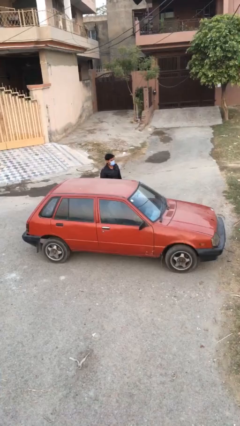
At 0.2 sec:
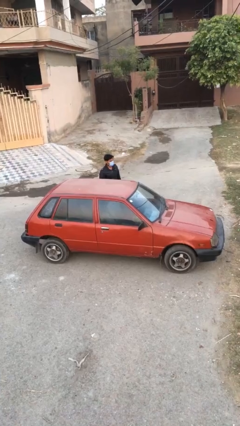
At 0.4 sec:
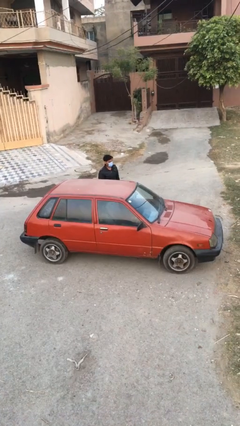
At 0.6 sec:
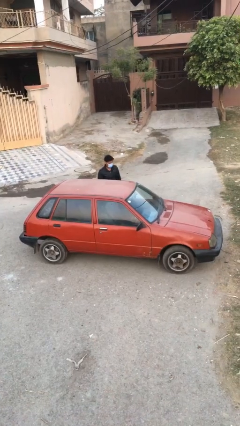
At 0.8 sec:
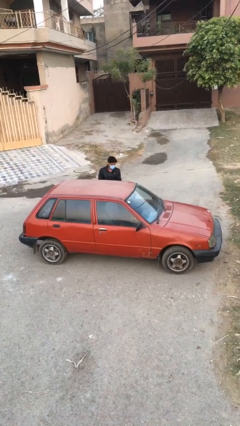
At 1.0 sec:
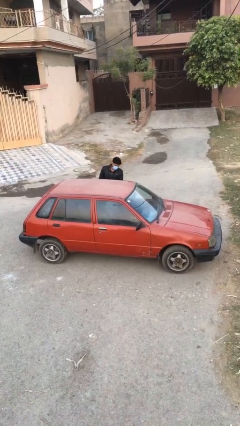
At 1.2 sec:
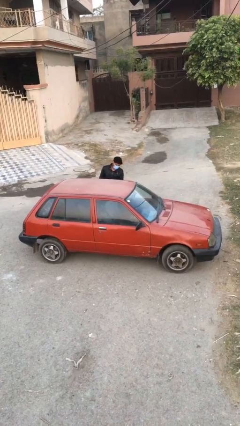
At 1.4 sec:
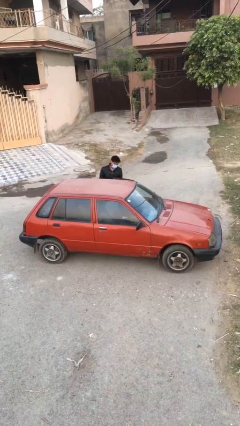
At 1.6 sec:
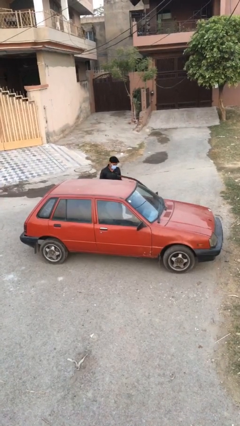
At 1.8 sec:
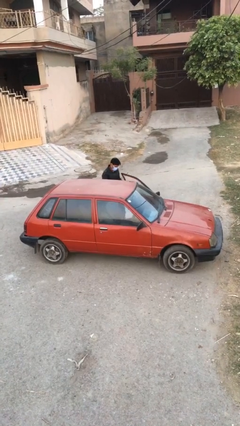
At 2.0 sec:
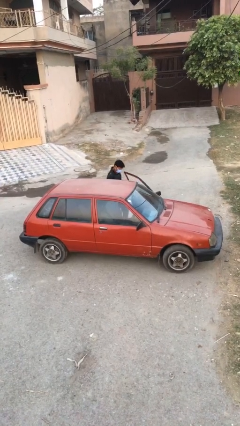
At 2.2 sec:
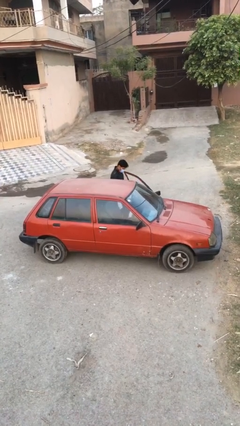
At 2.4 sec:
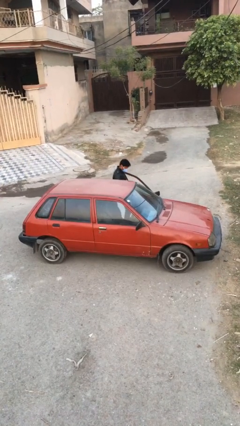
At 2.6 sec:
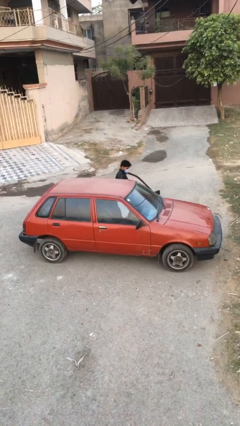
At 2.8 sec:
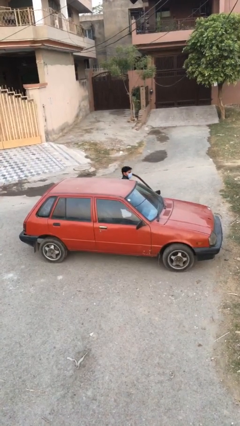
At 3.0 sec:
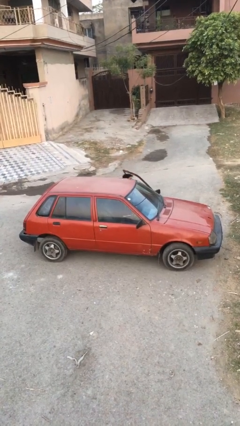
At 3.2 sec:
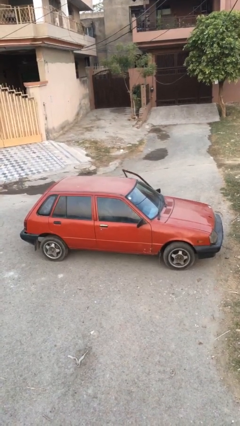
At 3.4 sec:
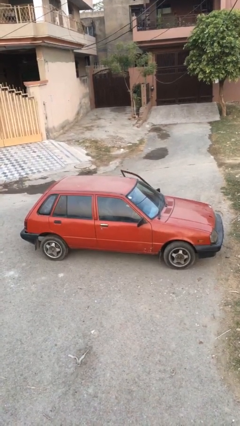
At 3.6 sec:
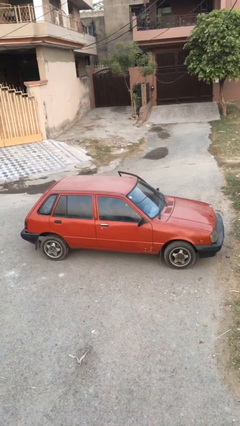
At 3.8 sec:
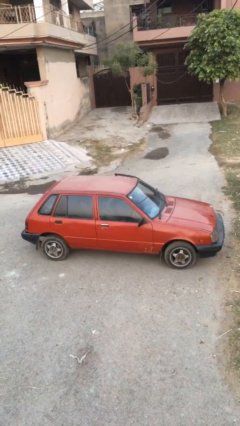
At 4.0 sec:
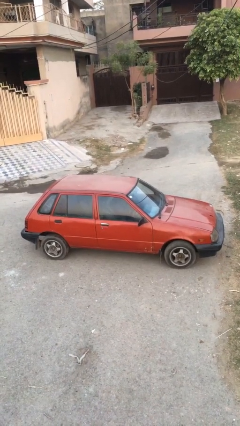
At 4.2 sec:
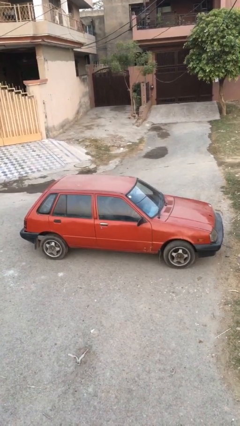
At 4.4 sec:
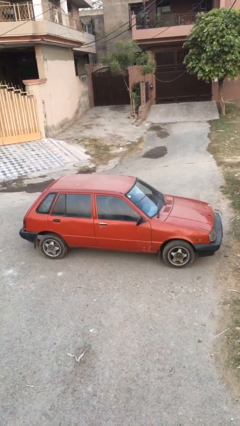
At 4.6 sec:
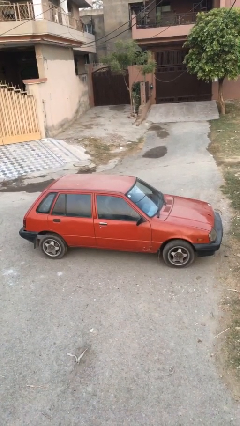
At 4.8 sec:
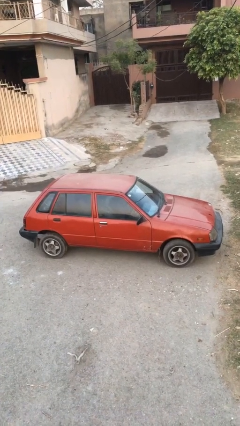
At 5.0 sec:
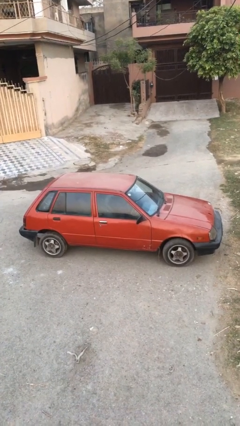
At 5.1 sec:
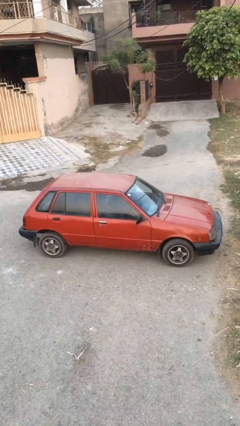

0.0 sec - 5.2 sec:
car picks up person

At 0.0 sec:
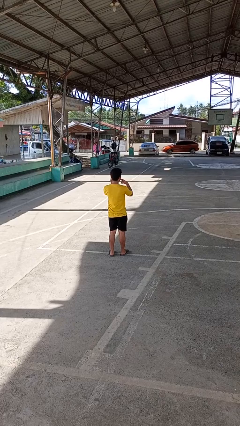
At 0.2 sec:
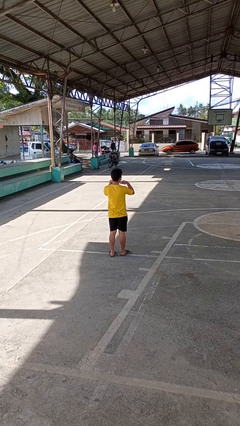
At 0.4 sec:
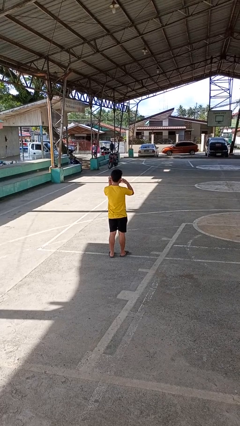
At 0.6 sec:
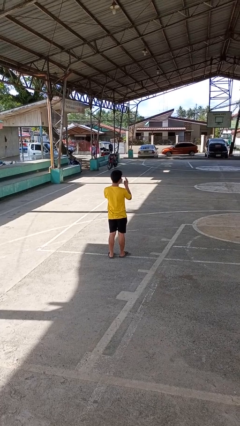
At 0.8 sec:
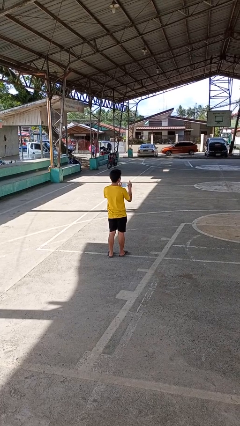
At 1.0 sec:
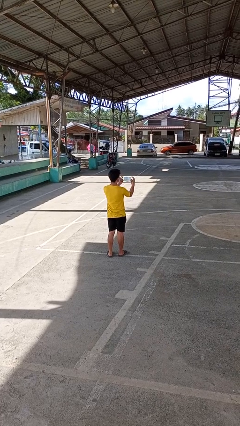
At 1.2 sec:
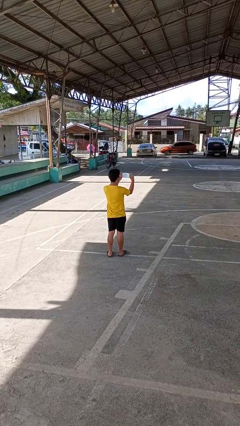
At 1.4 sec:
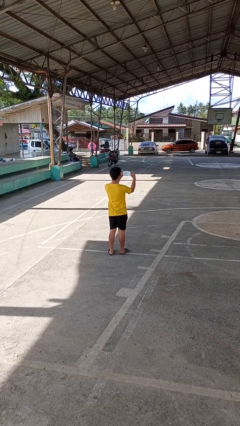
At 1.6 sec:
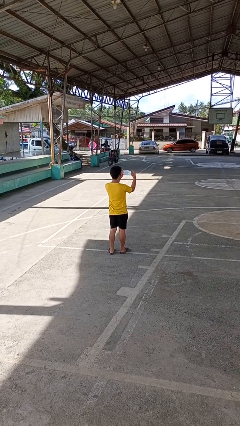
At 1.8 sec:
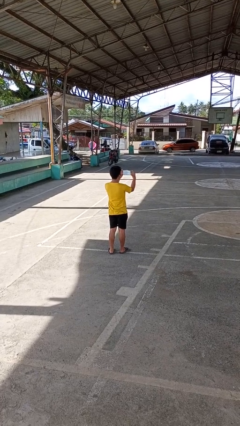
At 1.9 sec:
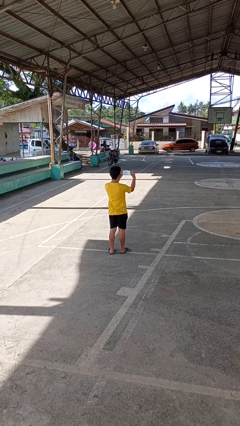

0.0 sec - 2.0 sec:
person takes off facemask

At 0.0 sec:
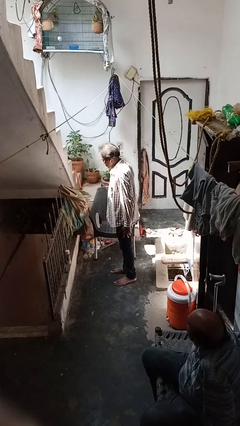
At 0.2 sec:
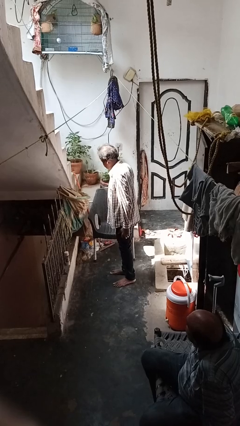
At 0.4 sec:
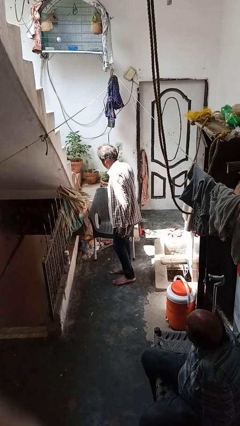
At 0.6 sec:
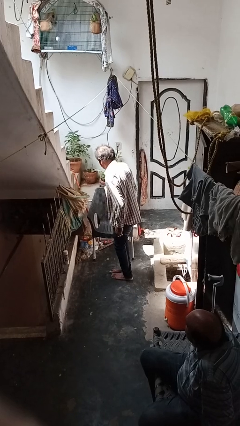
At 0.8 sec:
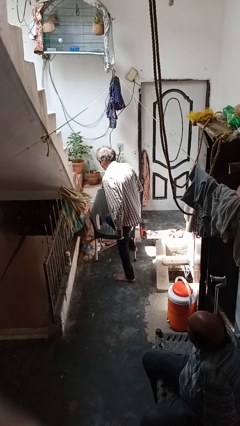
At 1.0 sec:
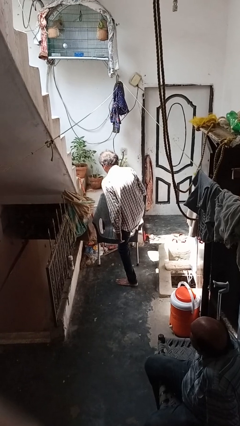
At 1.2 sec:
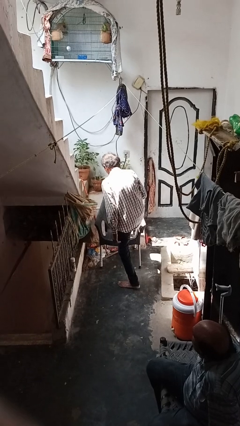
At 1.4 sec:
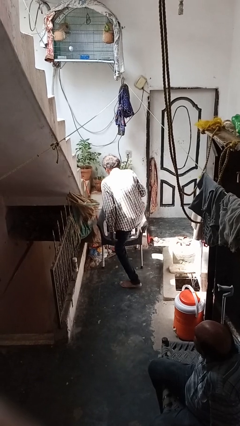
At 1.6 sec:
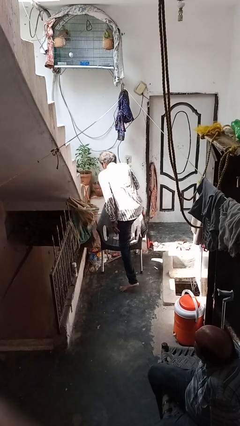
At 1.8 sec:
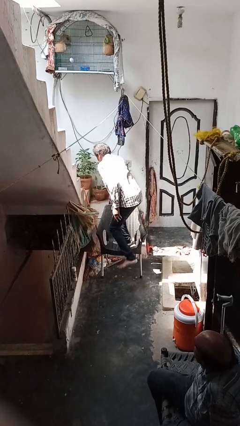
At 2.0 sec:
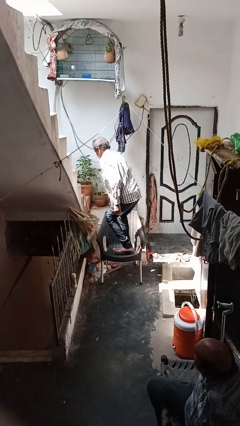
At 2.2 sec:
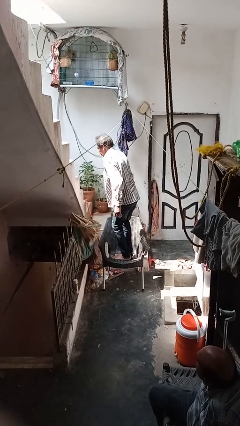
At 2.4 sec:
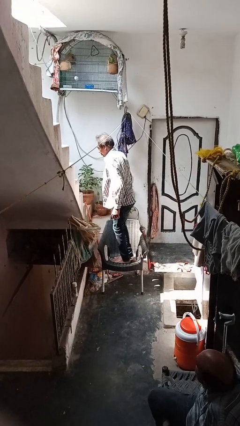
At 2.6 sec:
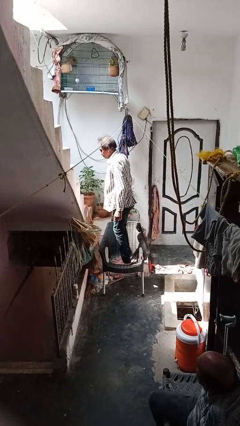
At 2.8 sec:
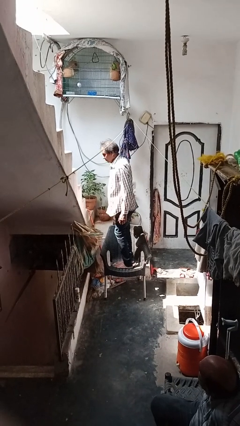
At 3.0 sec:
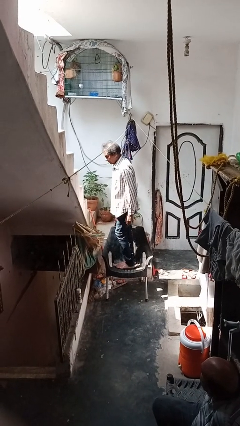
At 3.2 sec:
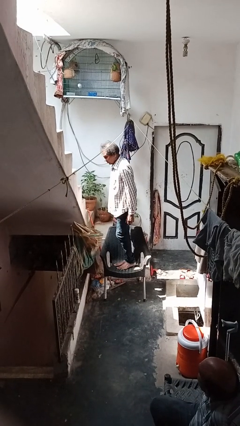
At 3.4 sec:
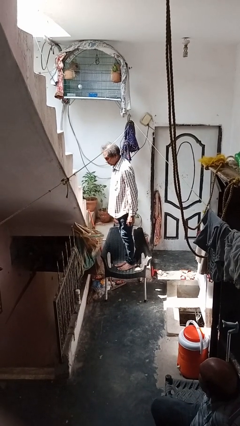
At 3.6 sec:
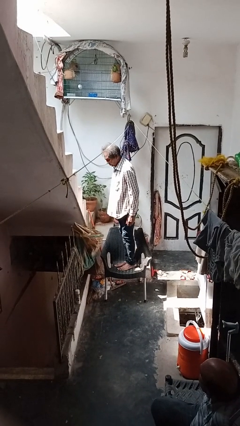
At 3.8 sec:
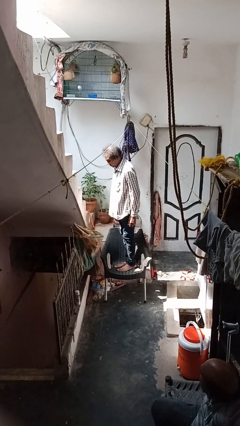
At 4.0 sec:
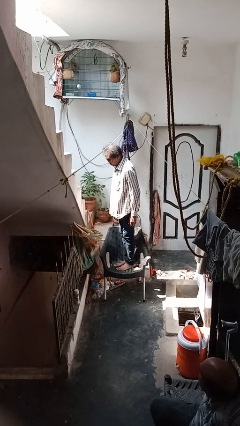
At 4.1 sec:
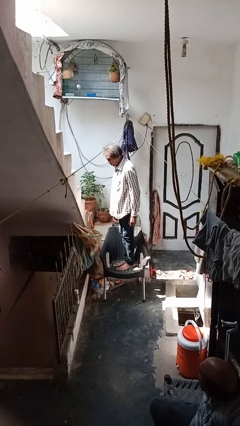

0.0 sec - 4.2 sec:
person climbs on chair

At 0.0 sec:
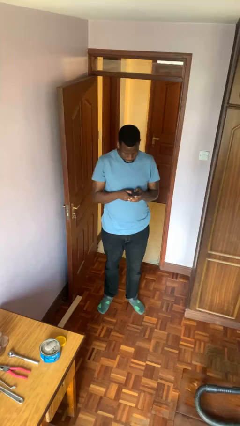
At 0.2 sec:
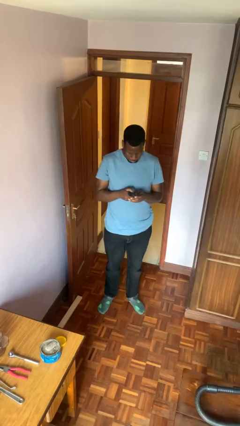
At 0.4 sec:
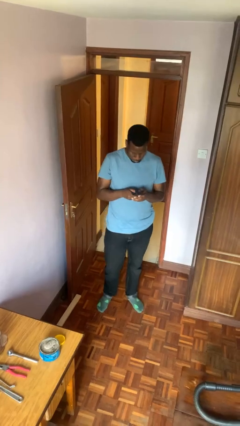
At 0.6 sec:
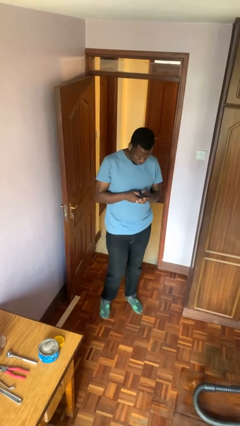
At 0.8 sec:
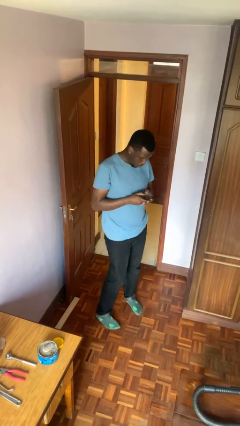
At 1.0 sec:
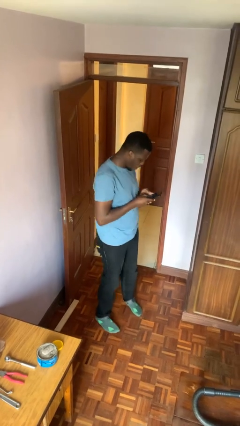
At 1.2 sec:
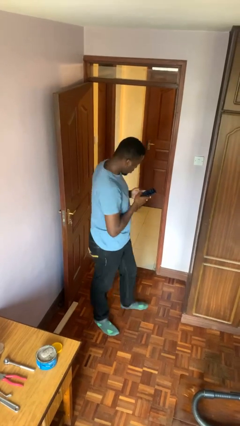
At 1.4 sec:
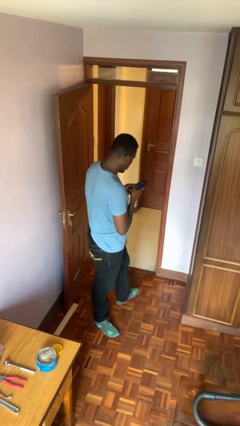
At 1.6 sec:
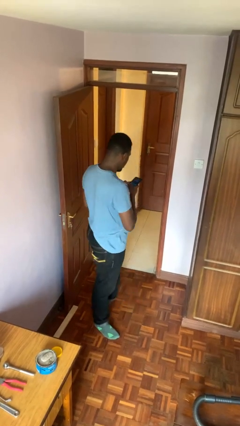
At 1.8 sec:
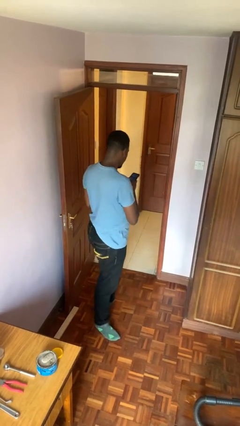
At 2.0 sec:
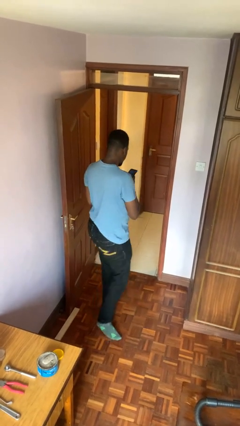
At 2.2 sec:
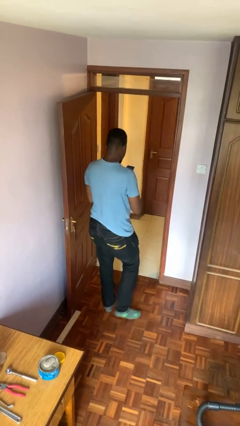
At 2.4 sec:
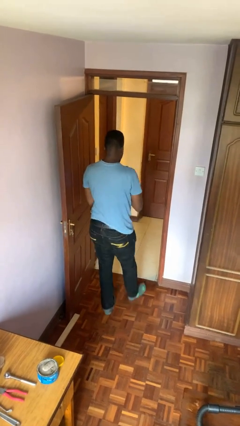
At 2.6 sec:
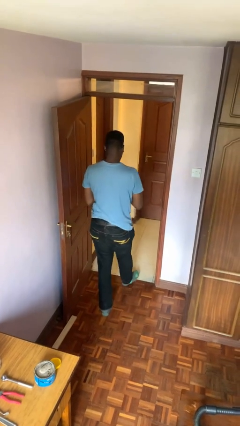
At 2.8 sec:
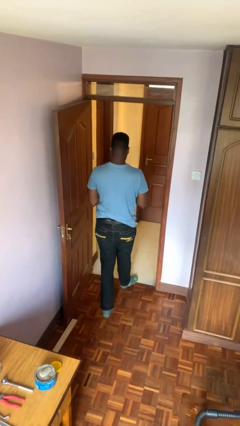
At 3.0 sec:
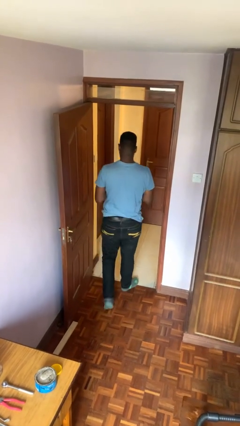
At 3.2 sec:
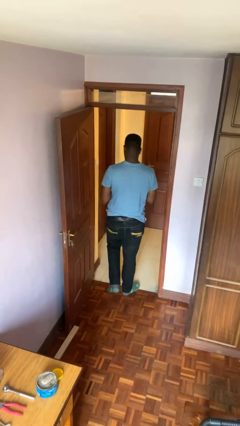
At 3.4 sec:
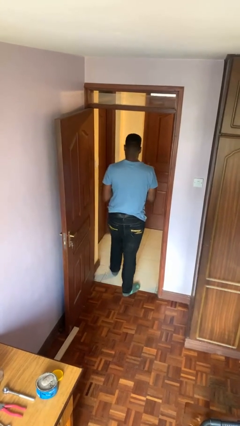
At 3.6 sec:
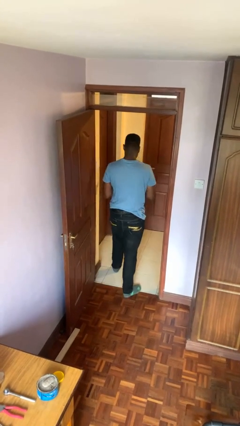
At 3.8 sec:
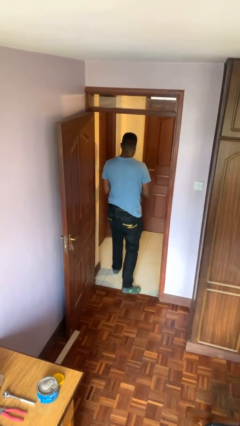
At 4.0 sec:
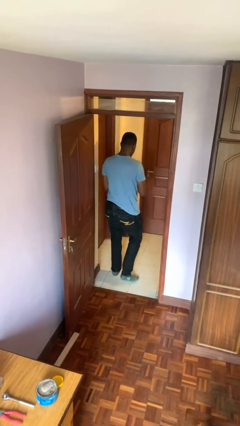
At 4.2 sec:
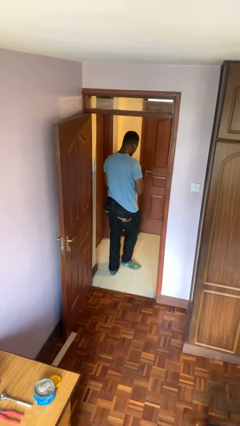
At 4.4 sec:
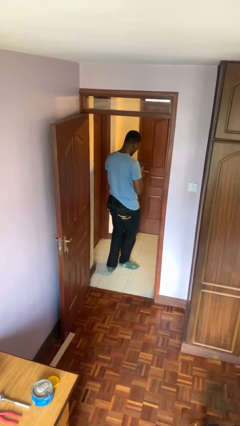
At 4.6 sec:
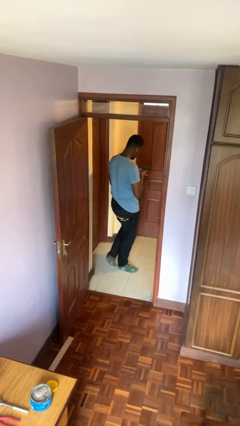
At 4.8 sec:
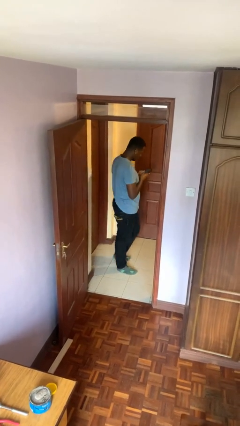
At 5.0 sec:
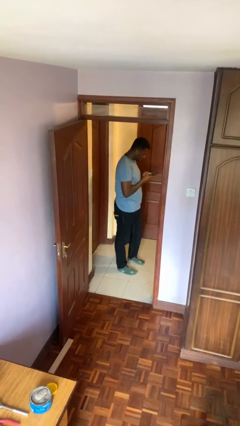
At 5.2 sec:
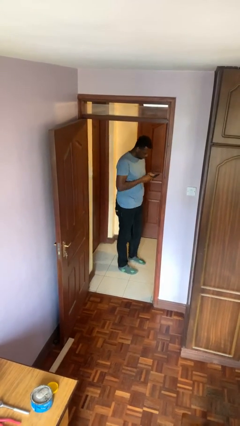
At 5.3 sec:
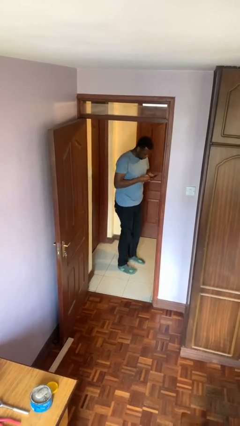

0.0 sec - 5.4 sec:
person exits scene through structure

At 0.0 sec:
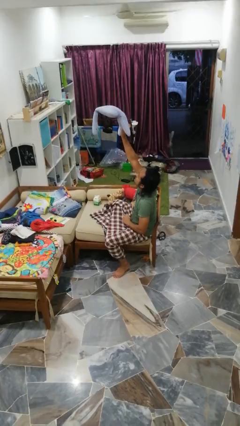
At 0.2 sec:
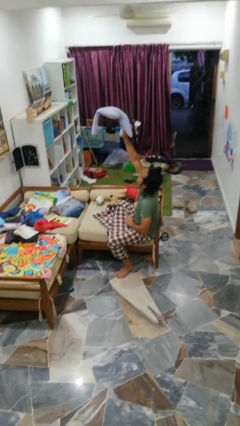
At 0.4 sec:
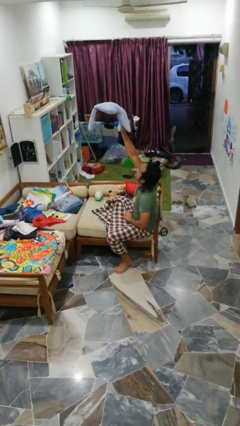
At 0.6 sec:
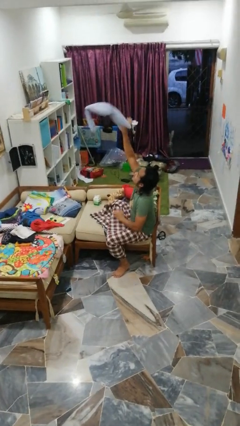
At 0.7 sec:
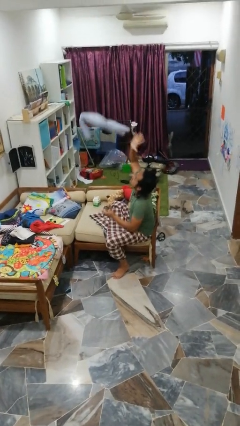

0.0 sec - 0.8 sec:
person drops object
